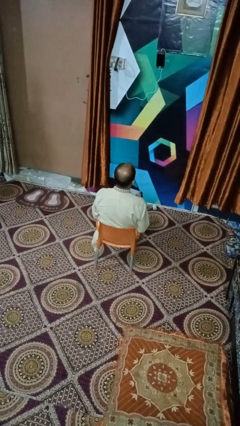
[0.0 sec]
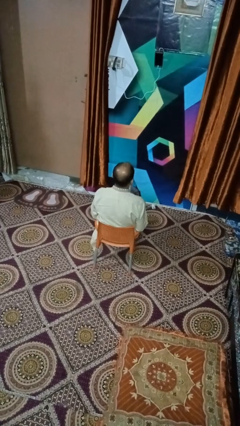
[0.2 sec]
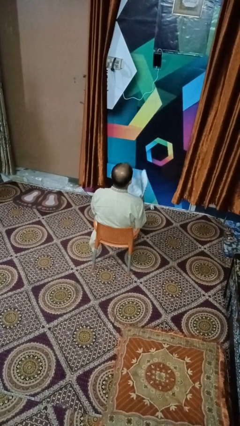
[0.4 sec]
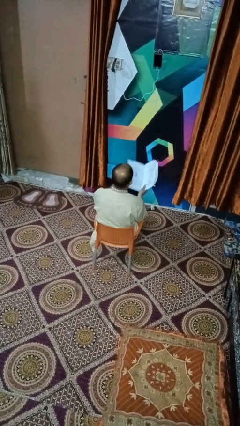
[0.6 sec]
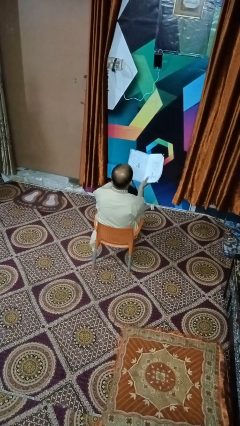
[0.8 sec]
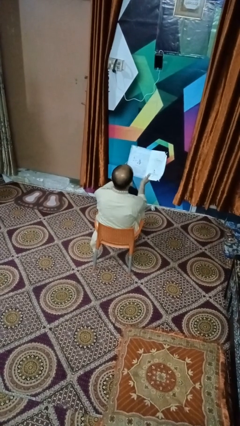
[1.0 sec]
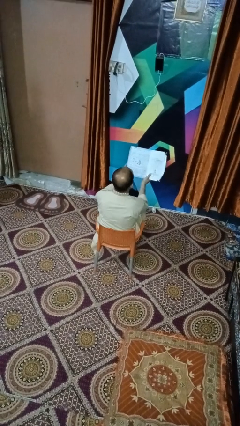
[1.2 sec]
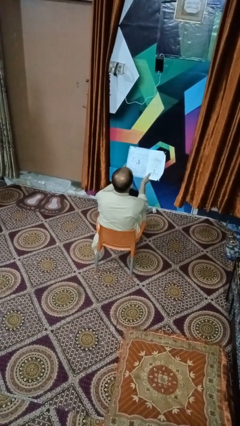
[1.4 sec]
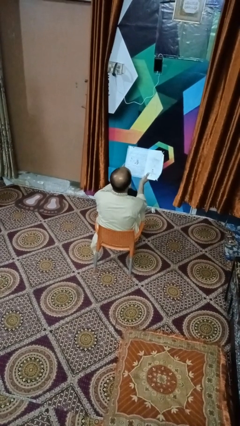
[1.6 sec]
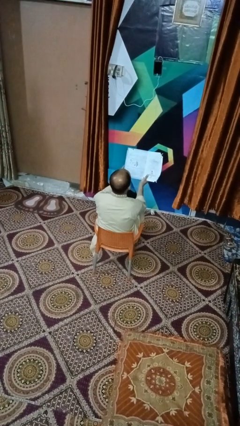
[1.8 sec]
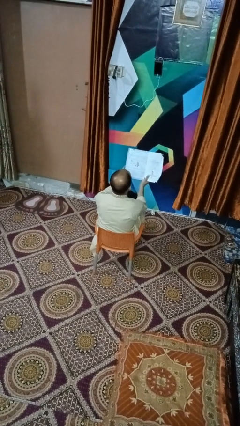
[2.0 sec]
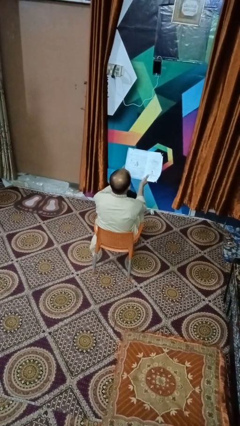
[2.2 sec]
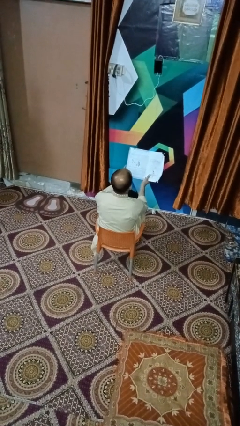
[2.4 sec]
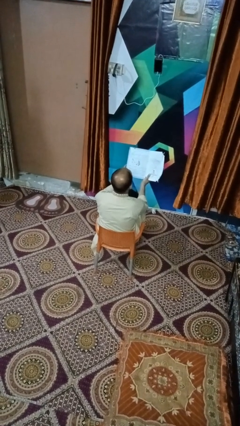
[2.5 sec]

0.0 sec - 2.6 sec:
person reads book

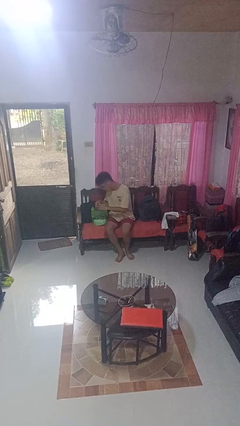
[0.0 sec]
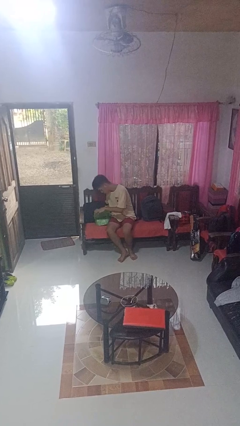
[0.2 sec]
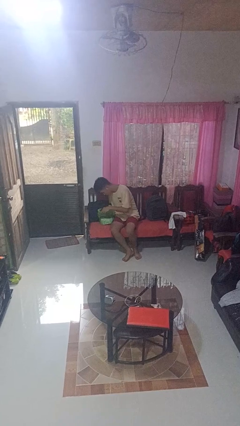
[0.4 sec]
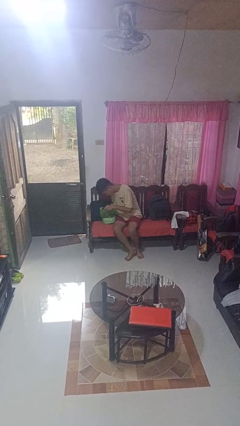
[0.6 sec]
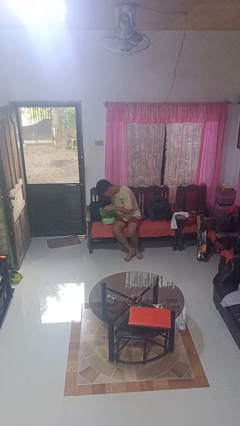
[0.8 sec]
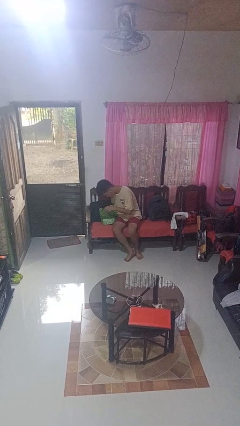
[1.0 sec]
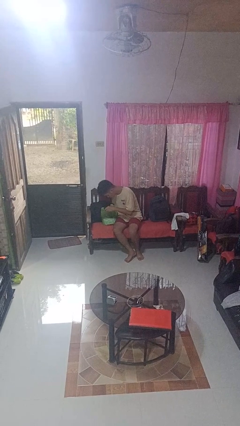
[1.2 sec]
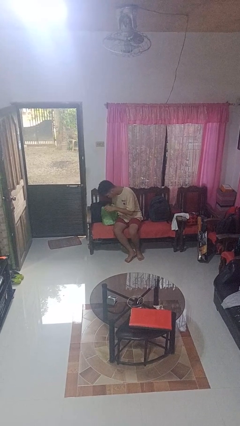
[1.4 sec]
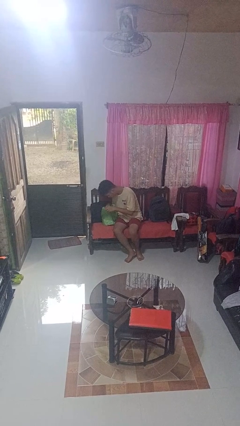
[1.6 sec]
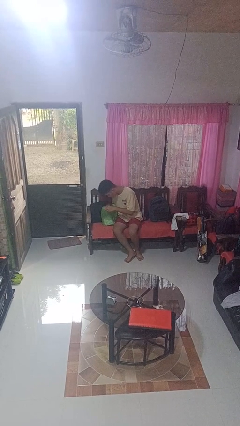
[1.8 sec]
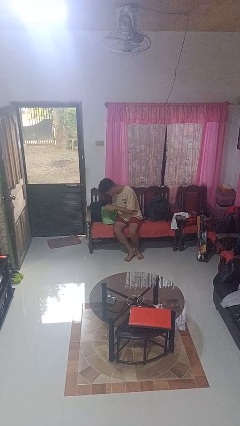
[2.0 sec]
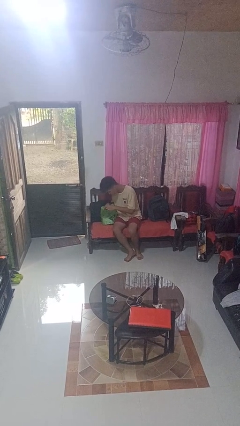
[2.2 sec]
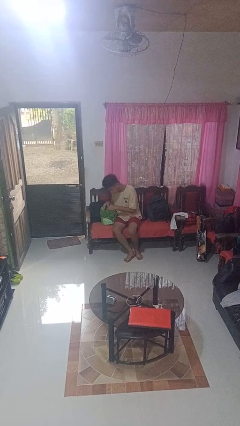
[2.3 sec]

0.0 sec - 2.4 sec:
person searches in bag

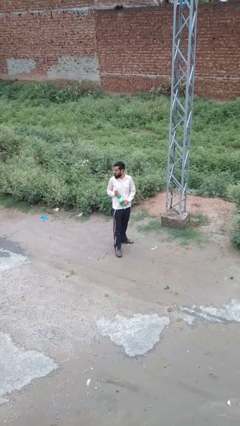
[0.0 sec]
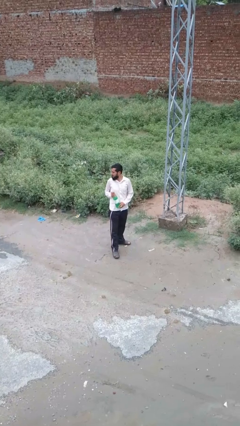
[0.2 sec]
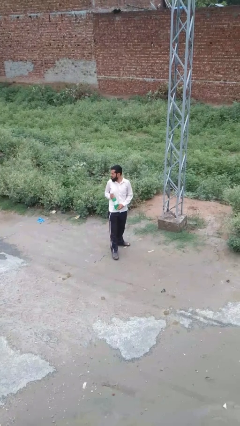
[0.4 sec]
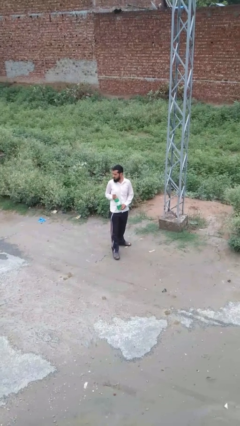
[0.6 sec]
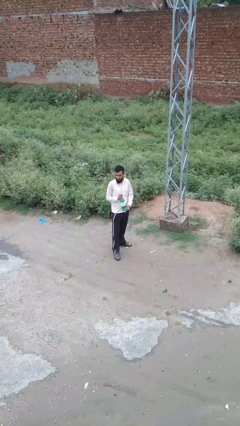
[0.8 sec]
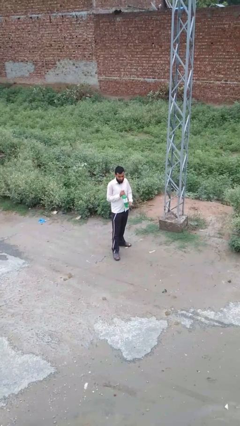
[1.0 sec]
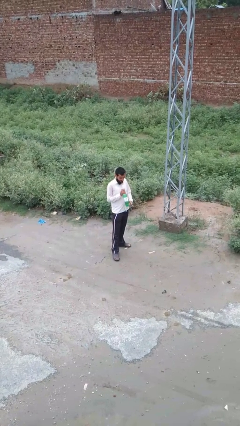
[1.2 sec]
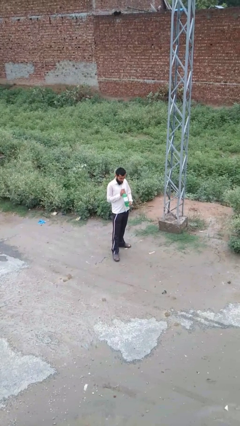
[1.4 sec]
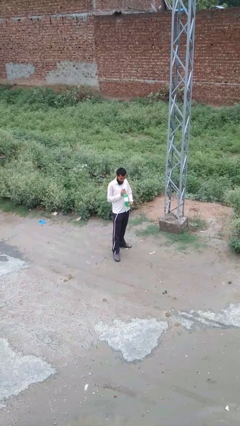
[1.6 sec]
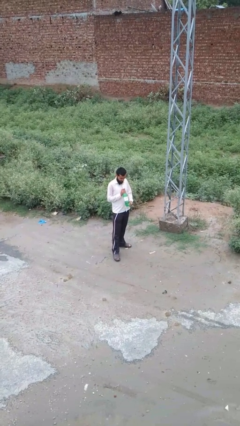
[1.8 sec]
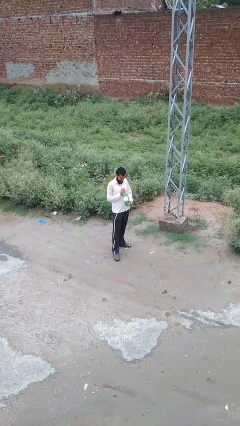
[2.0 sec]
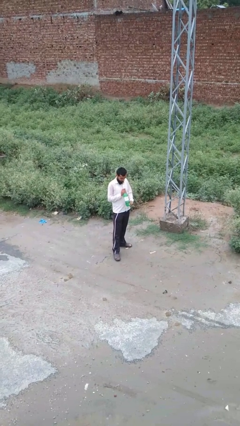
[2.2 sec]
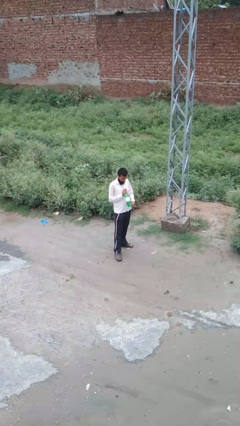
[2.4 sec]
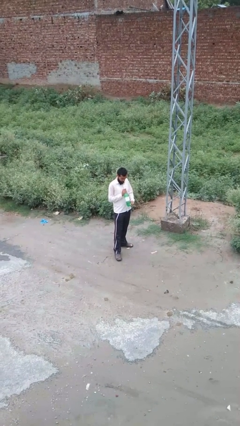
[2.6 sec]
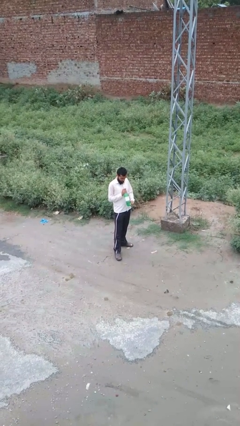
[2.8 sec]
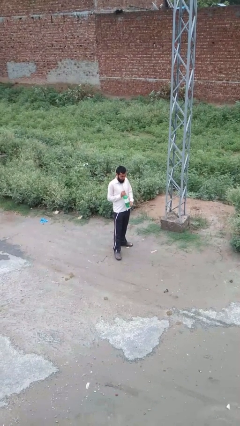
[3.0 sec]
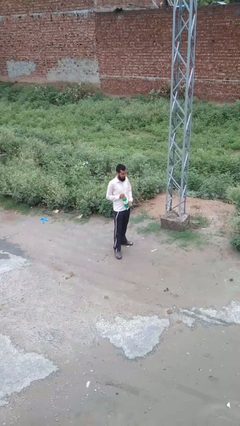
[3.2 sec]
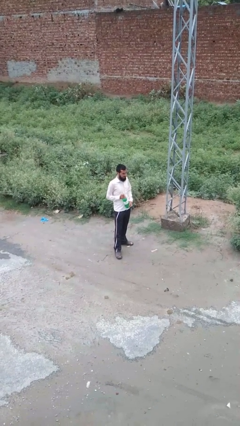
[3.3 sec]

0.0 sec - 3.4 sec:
person drinks from straw

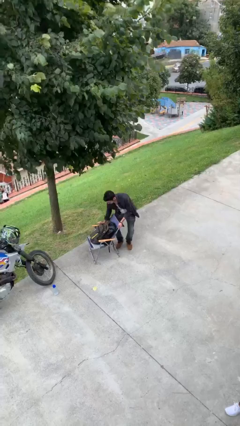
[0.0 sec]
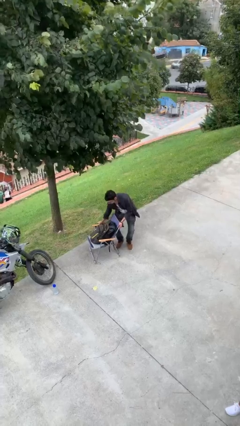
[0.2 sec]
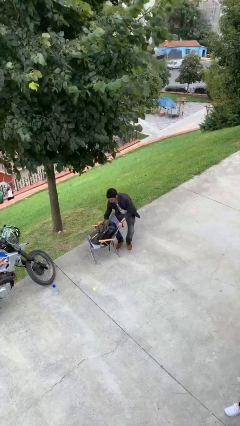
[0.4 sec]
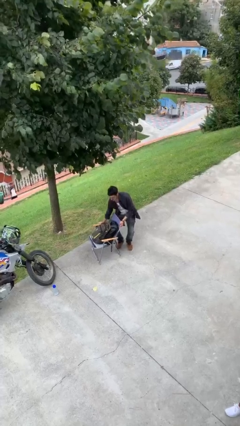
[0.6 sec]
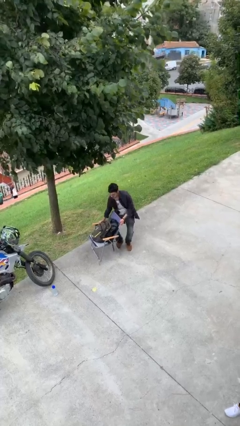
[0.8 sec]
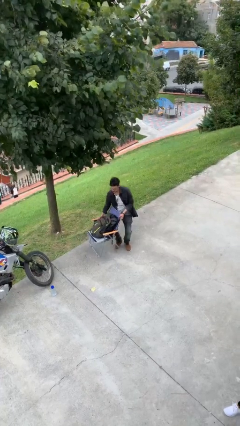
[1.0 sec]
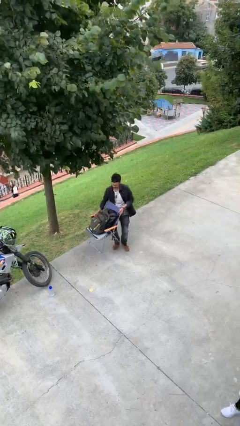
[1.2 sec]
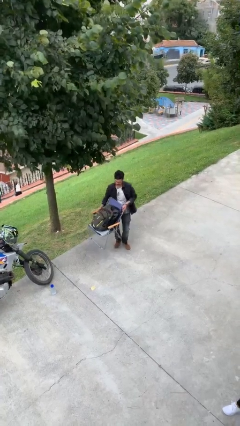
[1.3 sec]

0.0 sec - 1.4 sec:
person picks up object from floor

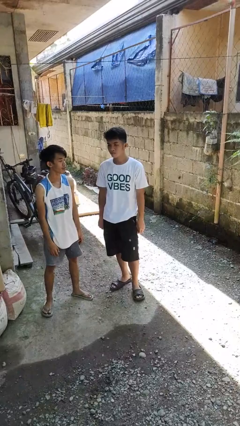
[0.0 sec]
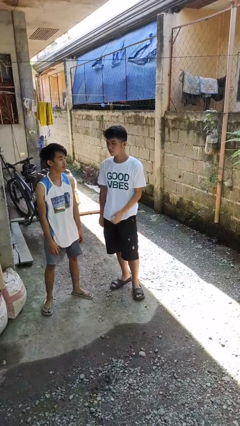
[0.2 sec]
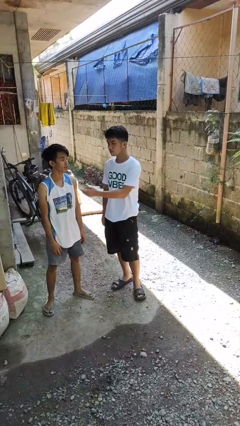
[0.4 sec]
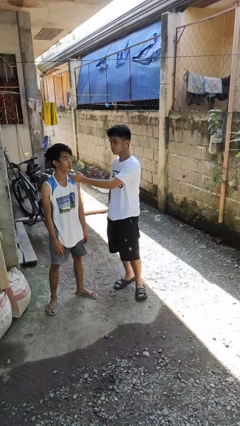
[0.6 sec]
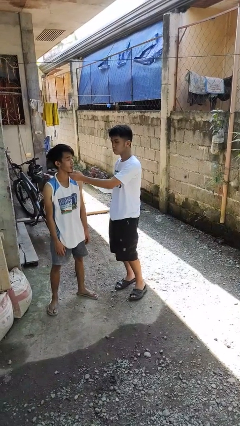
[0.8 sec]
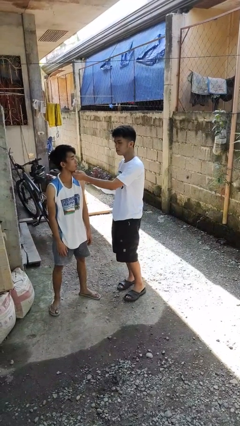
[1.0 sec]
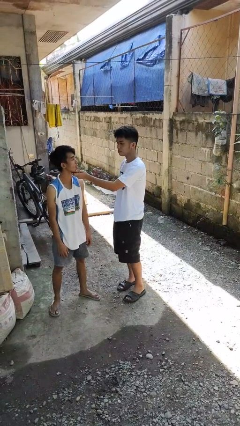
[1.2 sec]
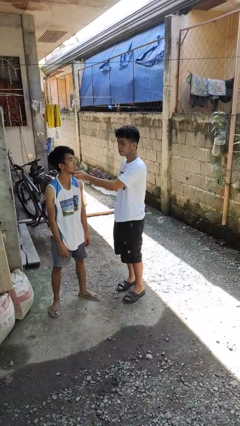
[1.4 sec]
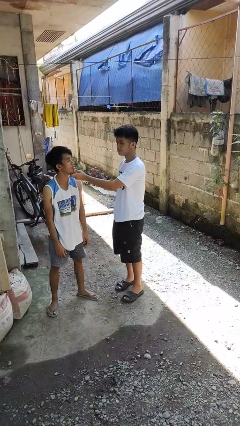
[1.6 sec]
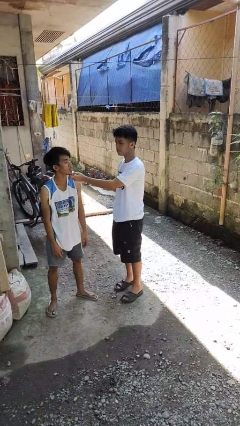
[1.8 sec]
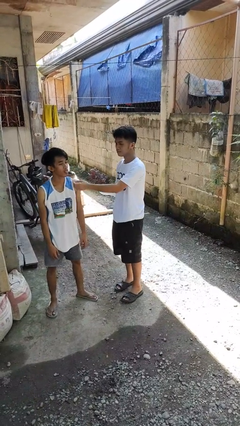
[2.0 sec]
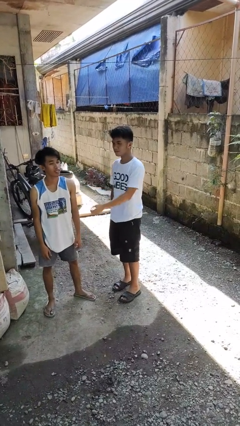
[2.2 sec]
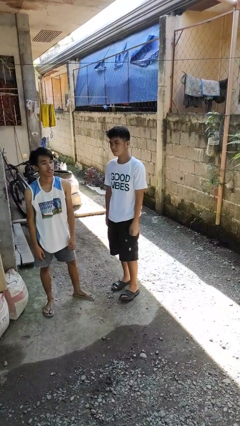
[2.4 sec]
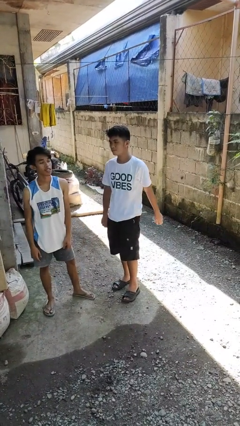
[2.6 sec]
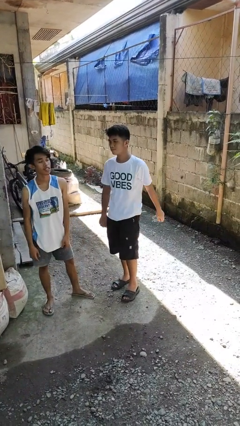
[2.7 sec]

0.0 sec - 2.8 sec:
person touches face of person

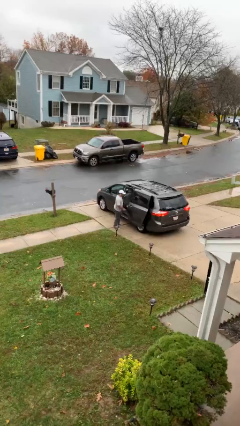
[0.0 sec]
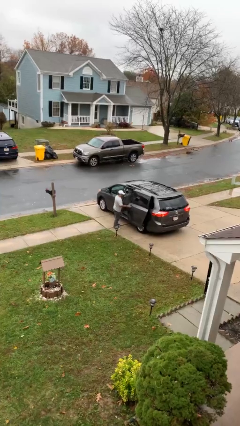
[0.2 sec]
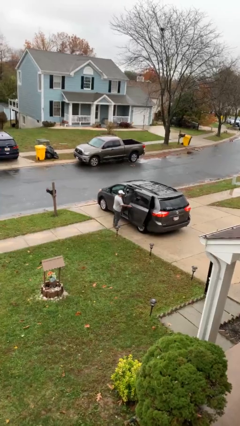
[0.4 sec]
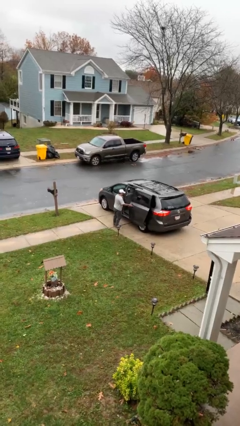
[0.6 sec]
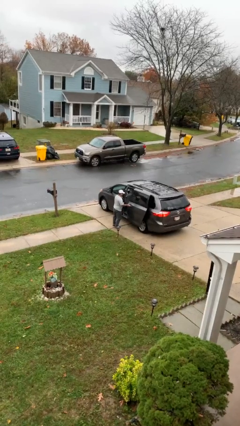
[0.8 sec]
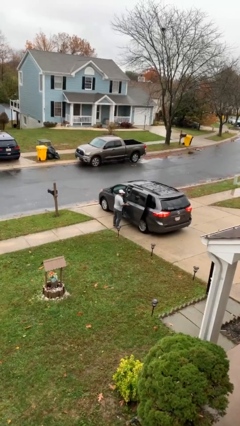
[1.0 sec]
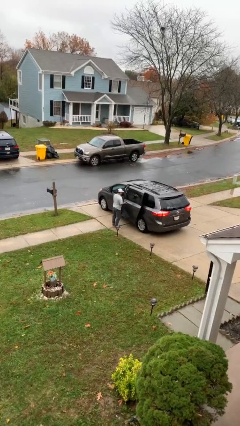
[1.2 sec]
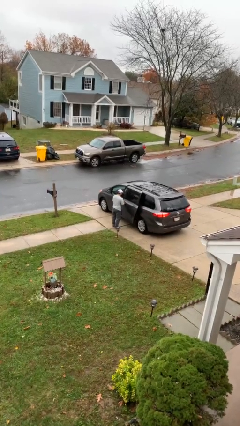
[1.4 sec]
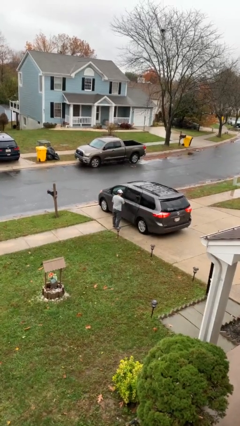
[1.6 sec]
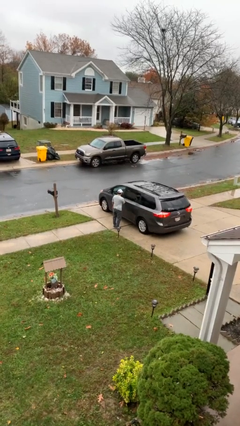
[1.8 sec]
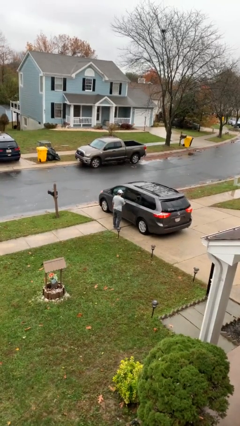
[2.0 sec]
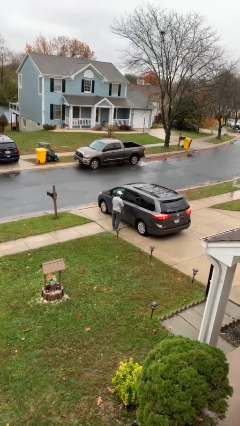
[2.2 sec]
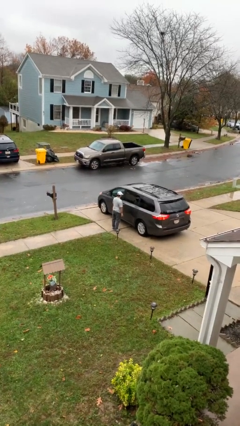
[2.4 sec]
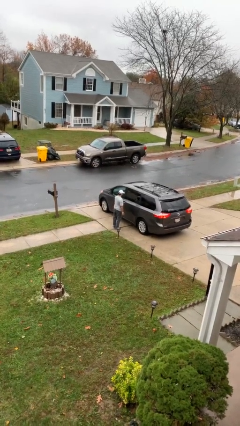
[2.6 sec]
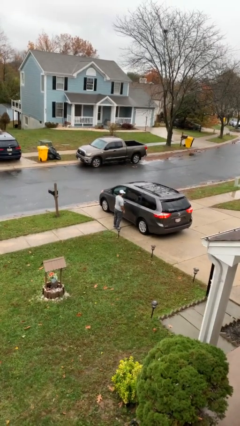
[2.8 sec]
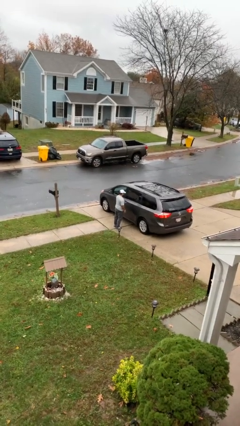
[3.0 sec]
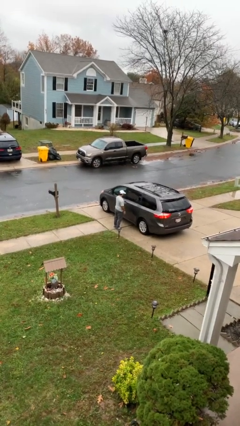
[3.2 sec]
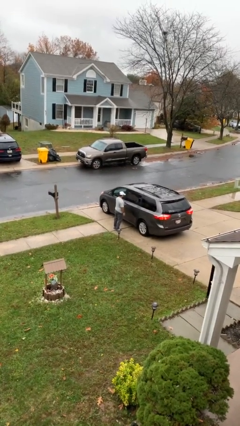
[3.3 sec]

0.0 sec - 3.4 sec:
person closes car door

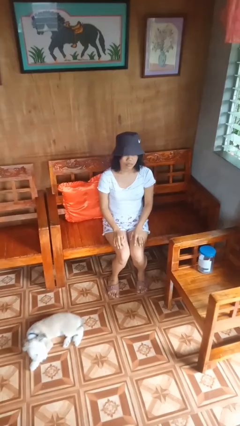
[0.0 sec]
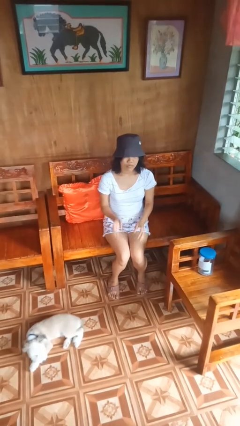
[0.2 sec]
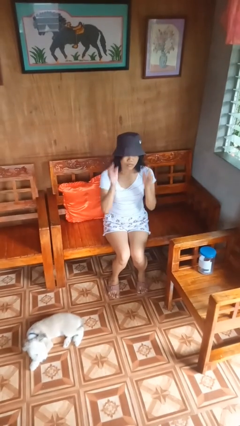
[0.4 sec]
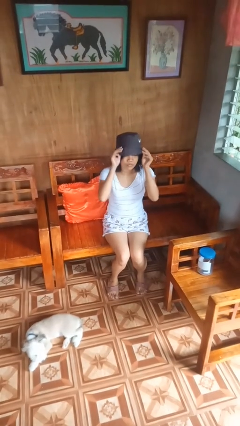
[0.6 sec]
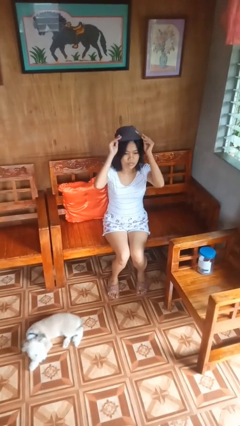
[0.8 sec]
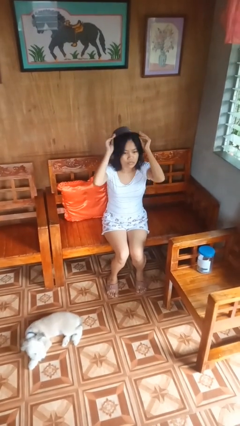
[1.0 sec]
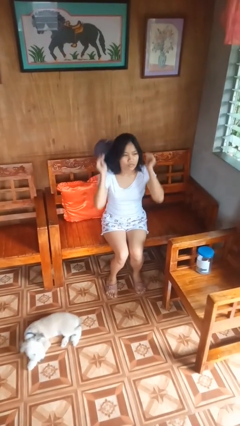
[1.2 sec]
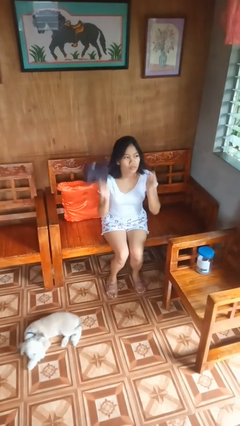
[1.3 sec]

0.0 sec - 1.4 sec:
person takes off hat
